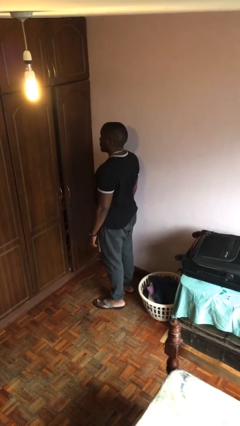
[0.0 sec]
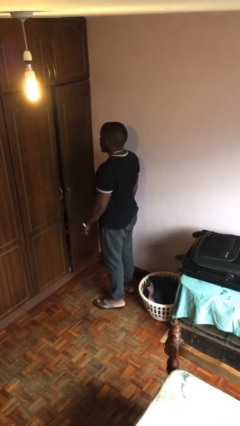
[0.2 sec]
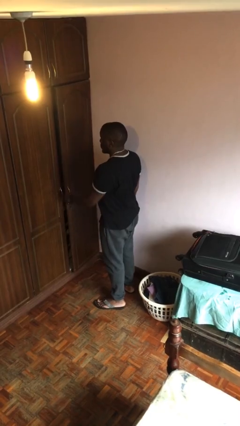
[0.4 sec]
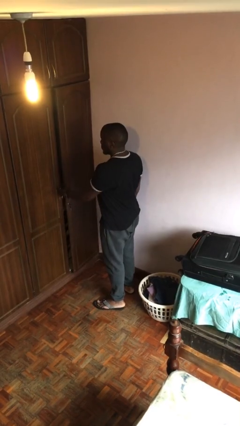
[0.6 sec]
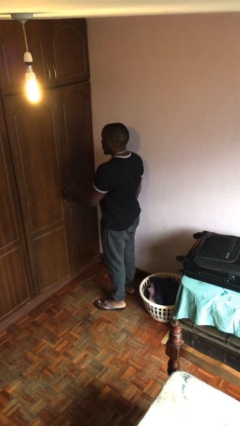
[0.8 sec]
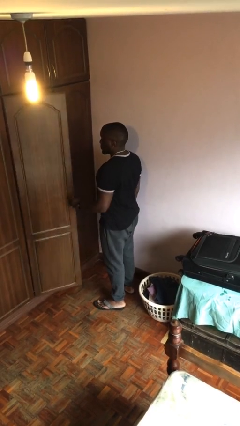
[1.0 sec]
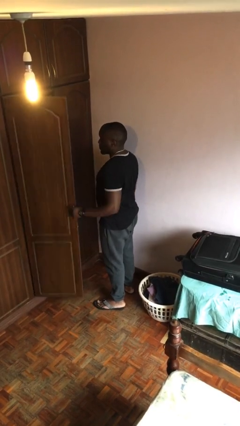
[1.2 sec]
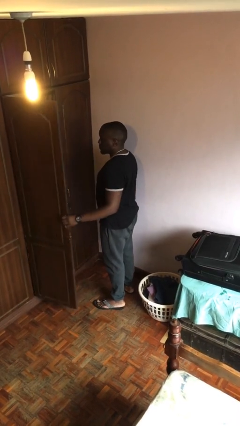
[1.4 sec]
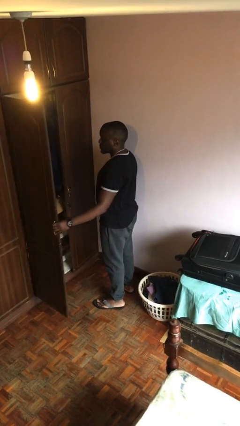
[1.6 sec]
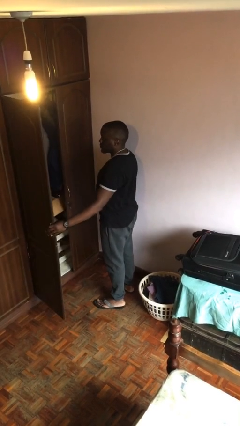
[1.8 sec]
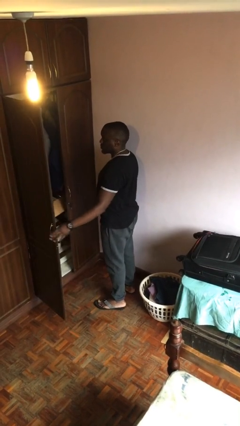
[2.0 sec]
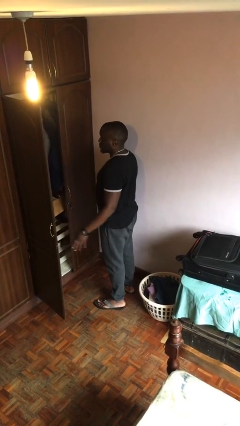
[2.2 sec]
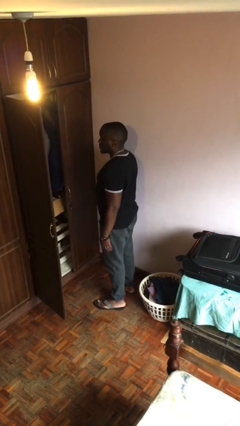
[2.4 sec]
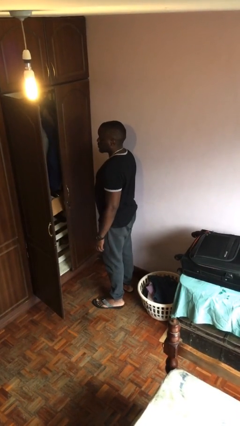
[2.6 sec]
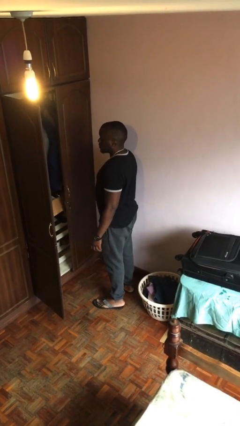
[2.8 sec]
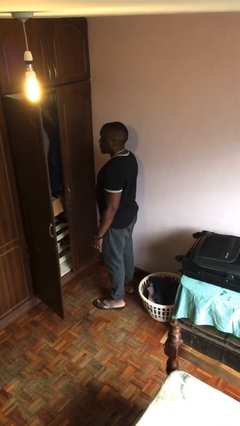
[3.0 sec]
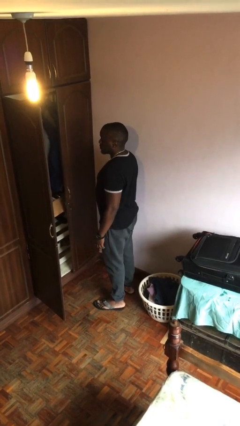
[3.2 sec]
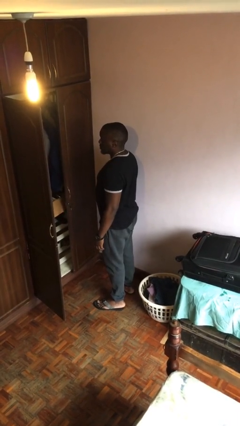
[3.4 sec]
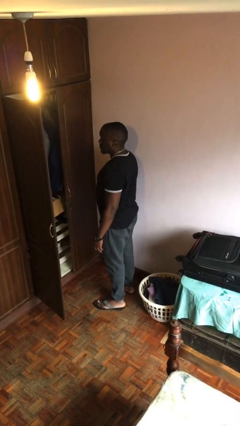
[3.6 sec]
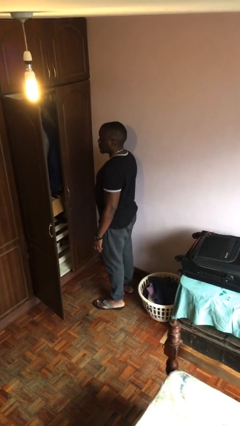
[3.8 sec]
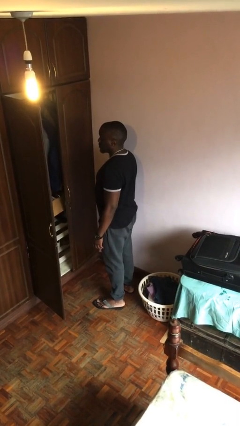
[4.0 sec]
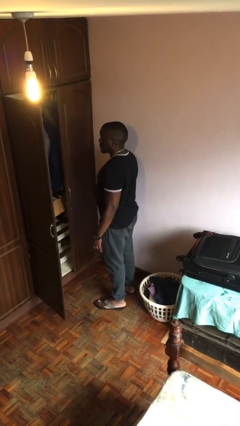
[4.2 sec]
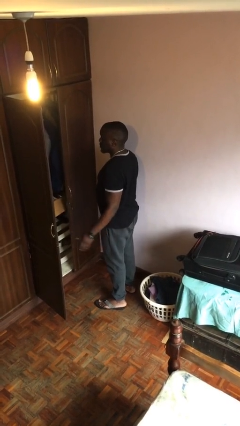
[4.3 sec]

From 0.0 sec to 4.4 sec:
person opens closet door

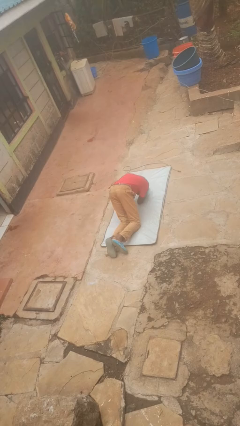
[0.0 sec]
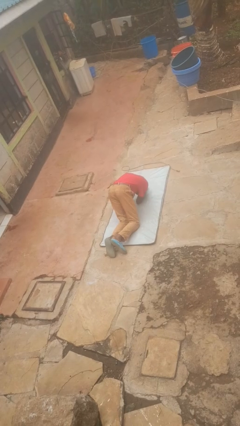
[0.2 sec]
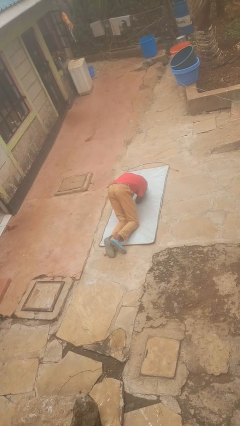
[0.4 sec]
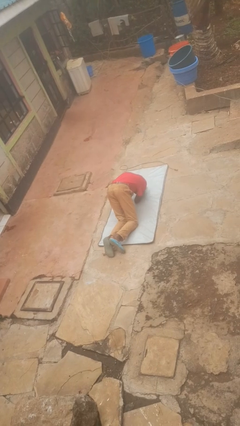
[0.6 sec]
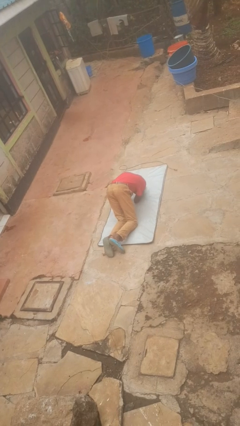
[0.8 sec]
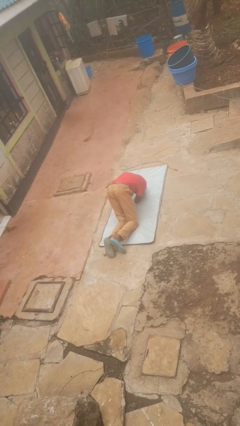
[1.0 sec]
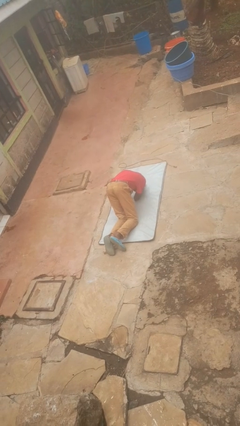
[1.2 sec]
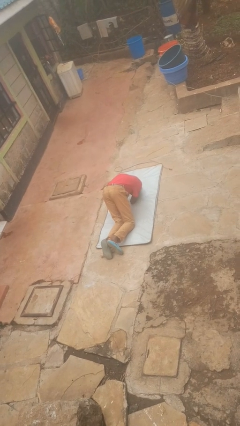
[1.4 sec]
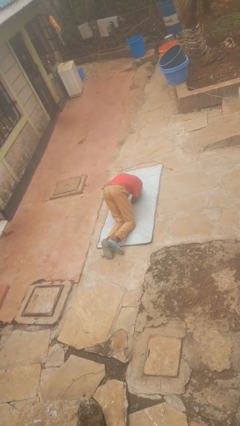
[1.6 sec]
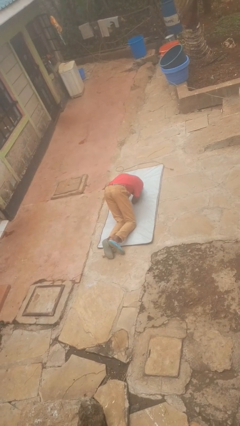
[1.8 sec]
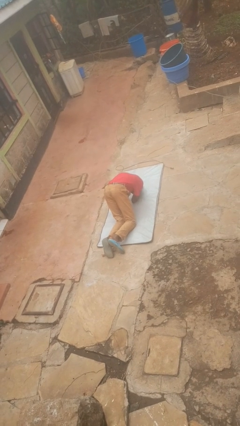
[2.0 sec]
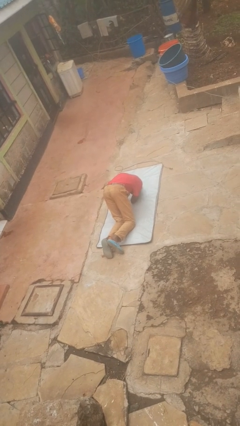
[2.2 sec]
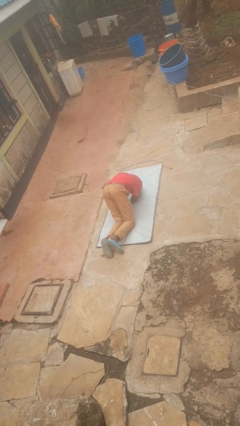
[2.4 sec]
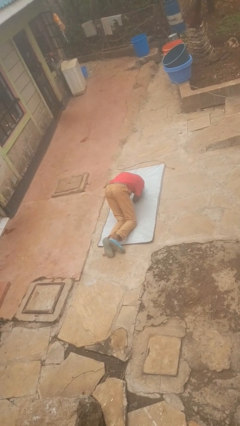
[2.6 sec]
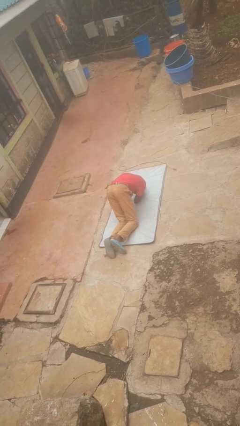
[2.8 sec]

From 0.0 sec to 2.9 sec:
person lies down on floor

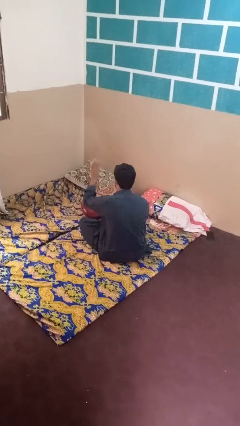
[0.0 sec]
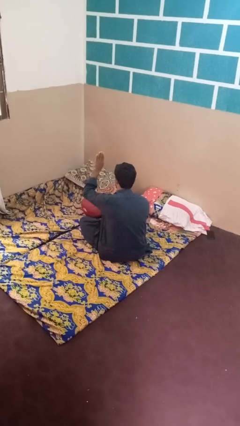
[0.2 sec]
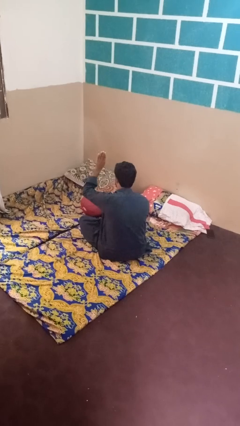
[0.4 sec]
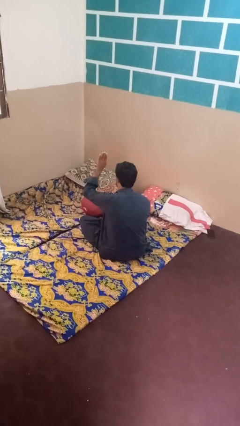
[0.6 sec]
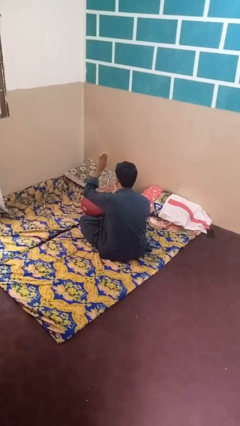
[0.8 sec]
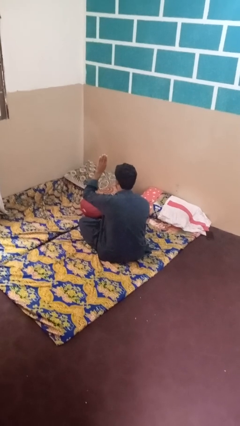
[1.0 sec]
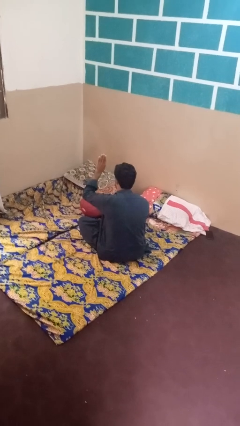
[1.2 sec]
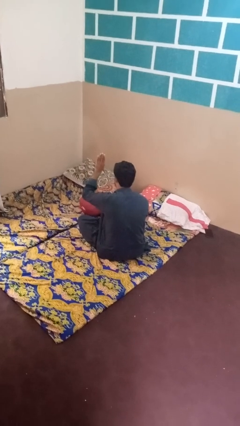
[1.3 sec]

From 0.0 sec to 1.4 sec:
person gestures number four

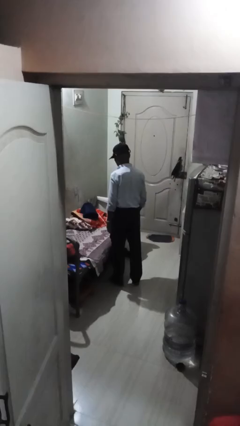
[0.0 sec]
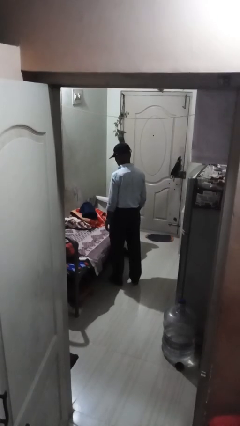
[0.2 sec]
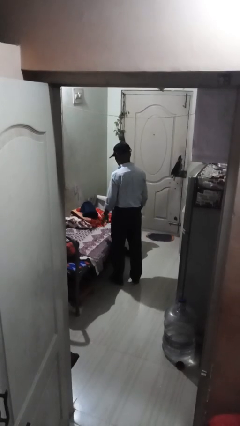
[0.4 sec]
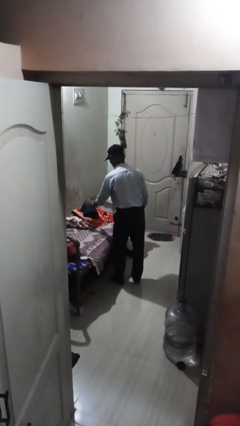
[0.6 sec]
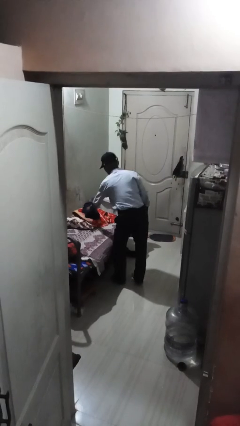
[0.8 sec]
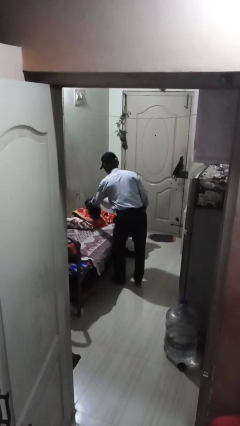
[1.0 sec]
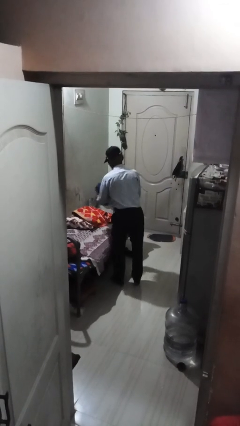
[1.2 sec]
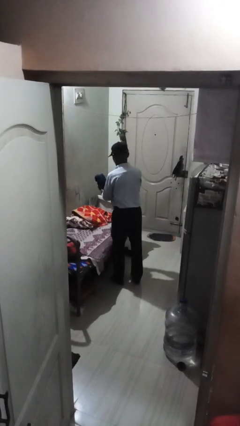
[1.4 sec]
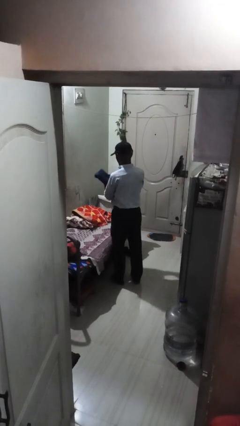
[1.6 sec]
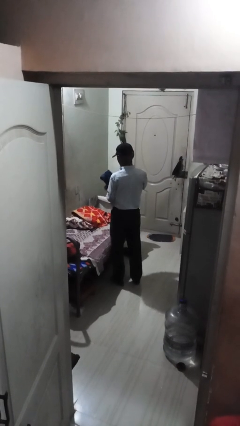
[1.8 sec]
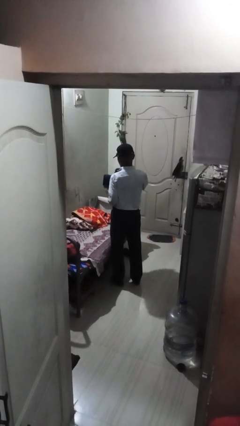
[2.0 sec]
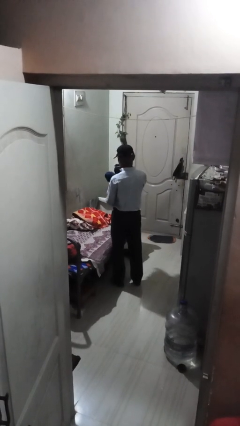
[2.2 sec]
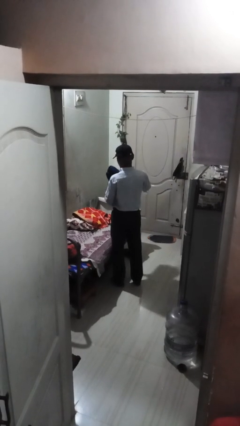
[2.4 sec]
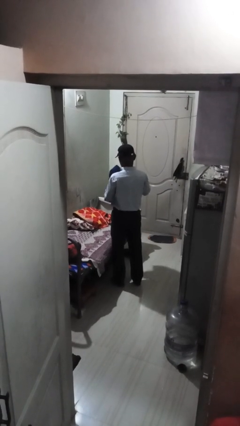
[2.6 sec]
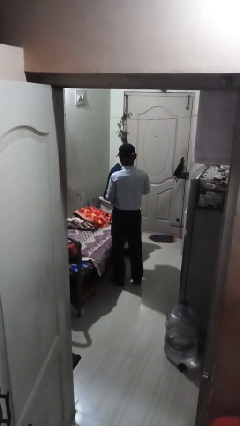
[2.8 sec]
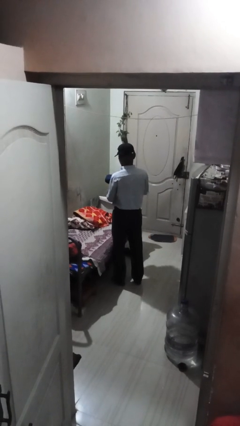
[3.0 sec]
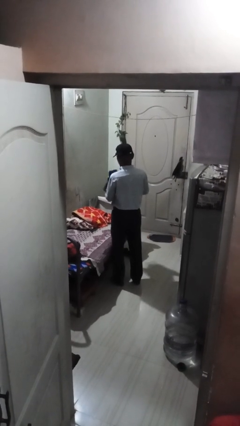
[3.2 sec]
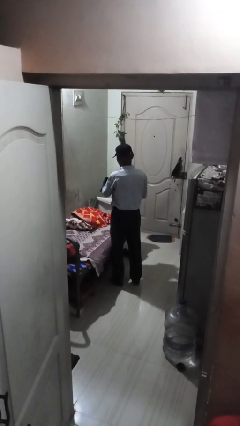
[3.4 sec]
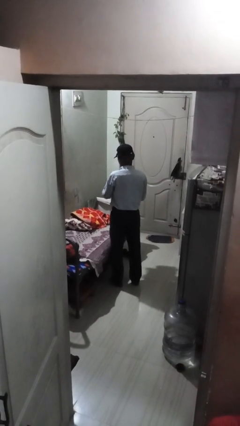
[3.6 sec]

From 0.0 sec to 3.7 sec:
person folds pants

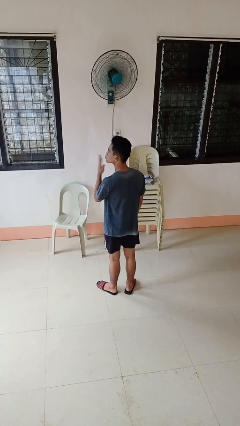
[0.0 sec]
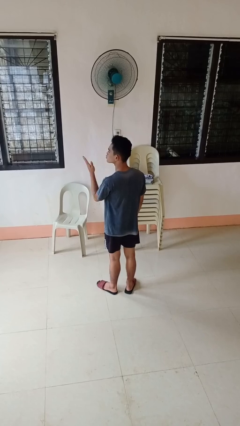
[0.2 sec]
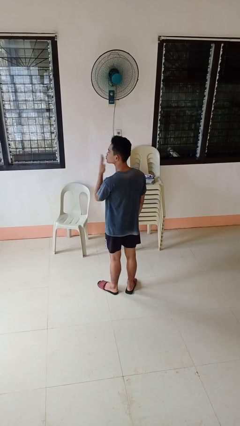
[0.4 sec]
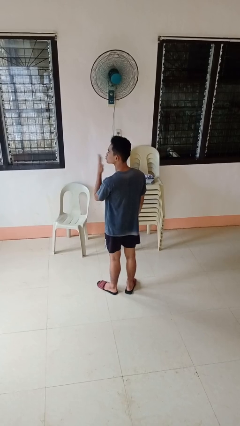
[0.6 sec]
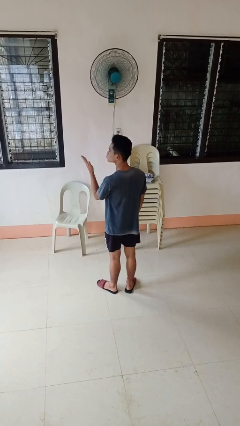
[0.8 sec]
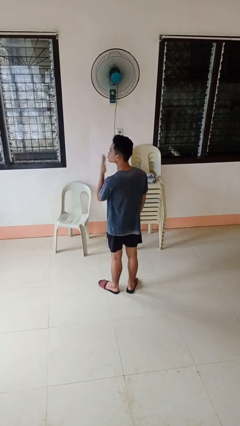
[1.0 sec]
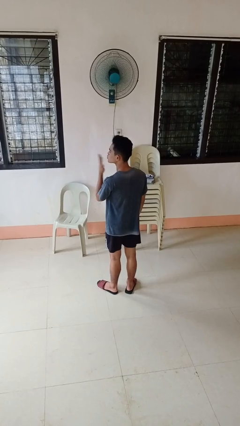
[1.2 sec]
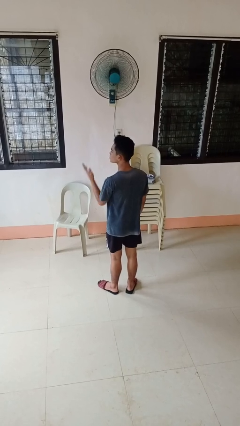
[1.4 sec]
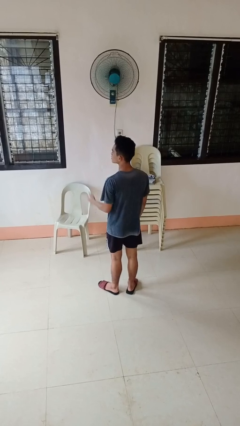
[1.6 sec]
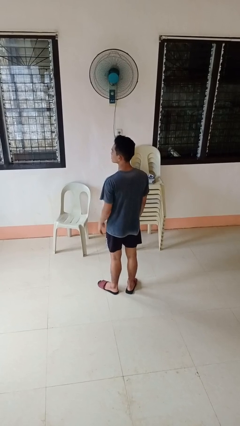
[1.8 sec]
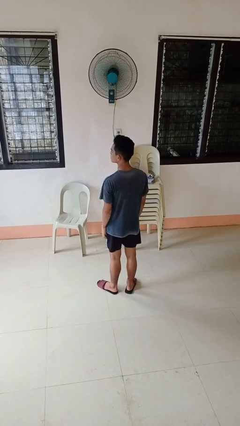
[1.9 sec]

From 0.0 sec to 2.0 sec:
person gestures blow kiss
